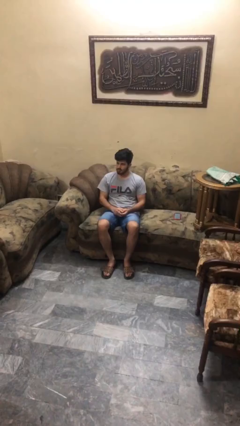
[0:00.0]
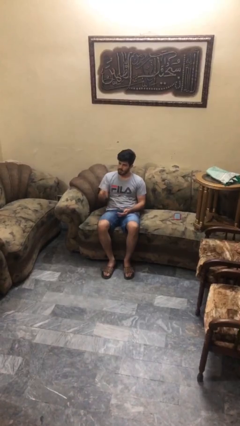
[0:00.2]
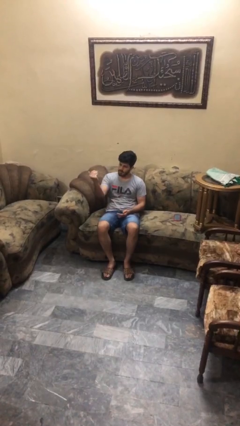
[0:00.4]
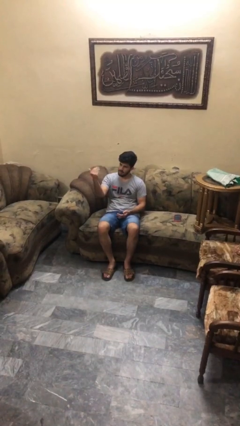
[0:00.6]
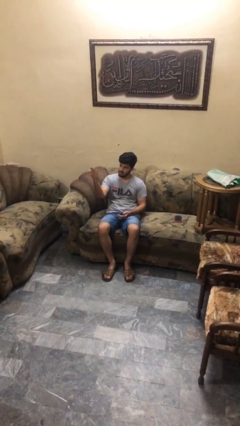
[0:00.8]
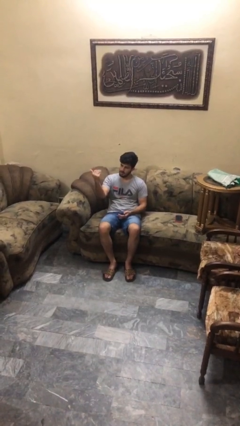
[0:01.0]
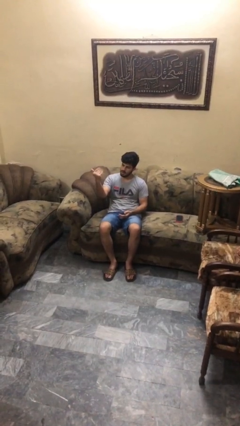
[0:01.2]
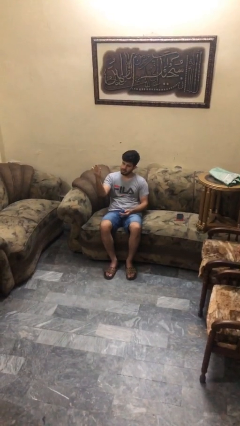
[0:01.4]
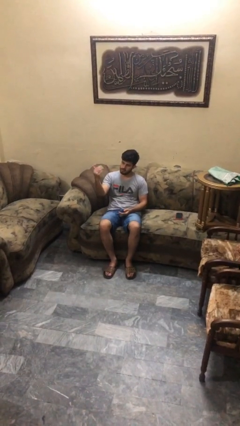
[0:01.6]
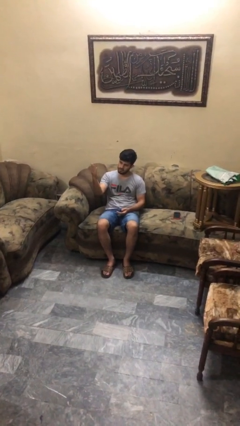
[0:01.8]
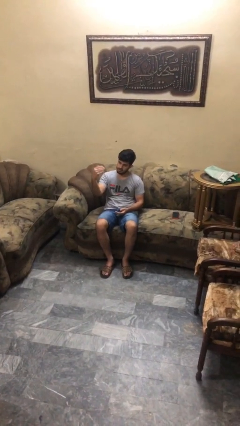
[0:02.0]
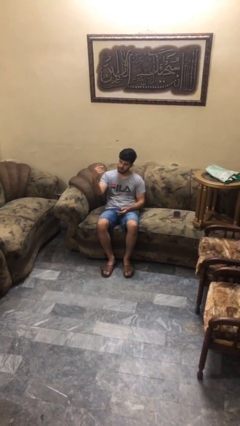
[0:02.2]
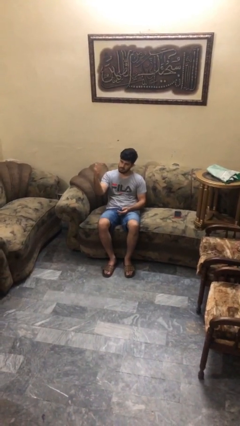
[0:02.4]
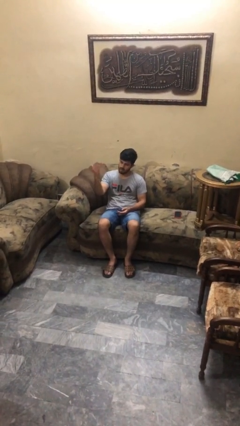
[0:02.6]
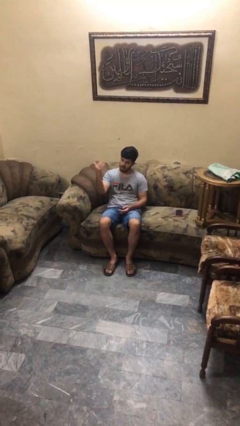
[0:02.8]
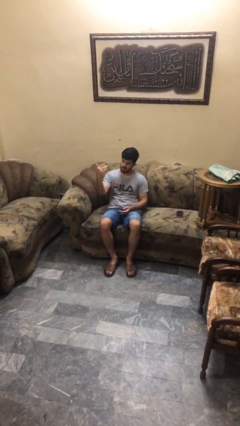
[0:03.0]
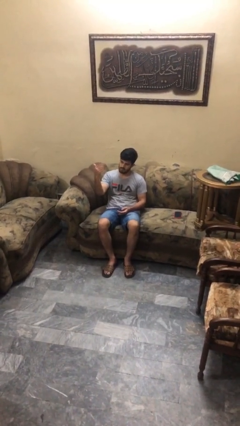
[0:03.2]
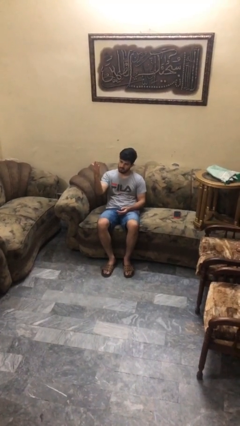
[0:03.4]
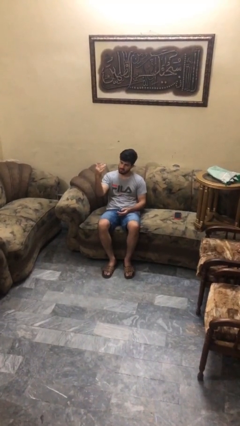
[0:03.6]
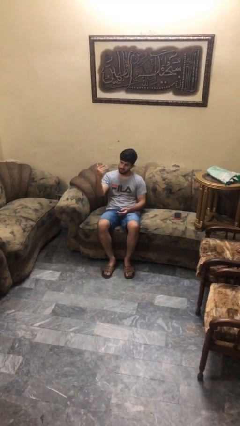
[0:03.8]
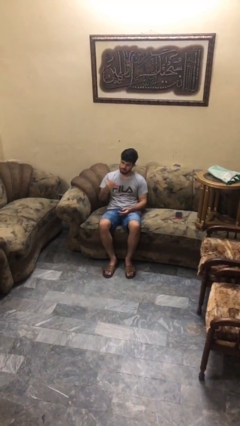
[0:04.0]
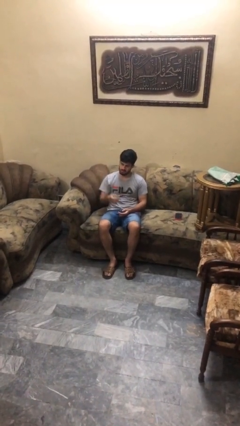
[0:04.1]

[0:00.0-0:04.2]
person gestures come here

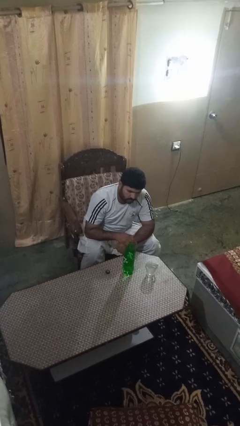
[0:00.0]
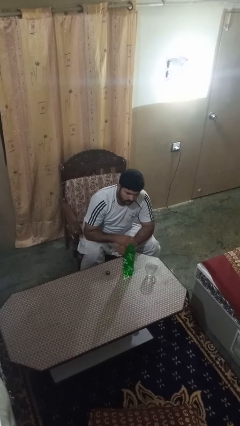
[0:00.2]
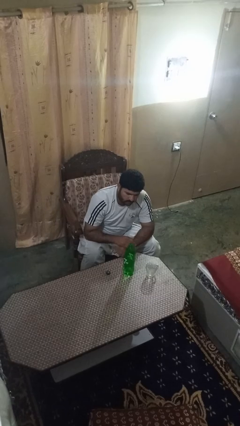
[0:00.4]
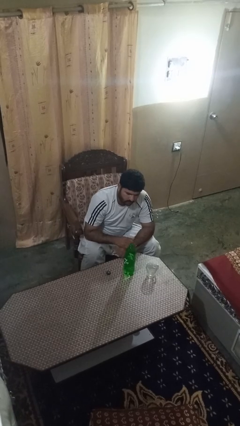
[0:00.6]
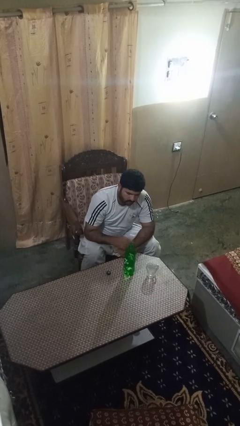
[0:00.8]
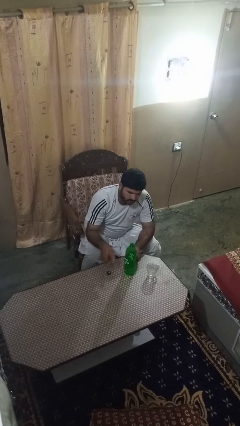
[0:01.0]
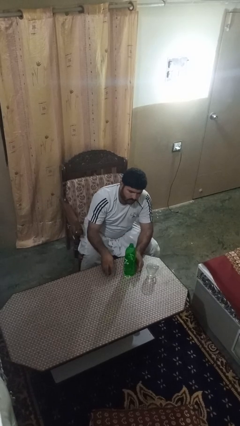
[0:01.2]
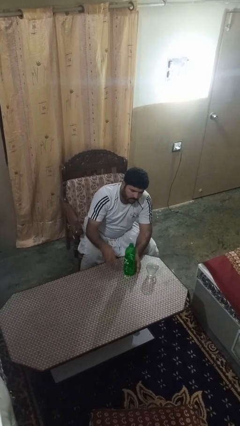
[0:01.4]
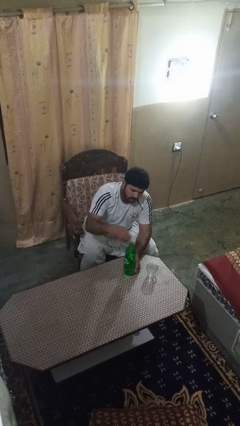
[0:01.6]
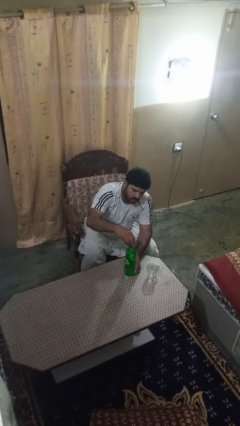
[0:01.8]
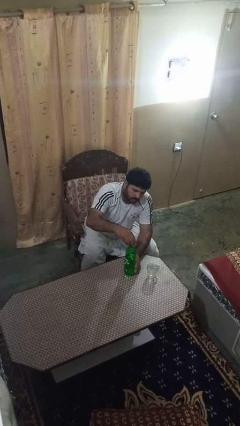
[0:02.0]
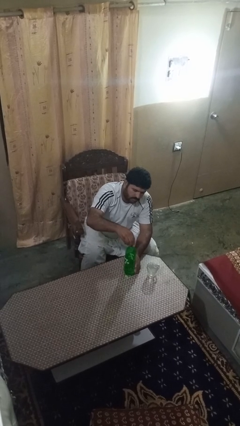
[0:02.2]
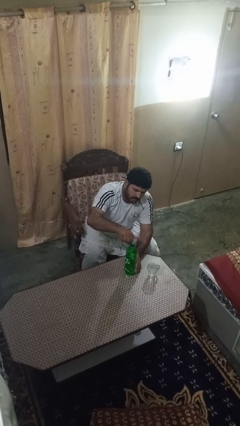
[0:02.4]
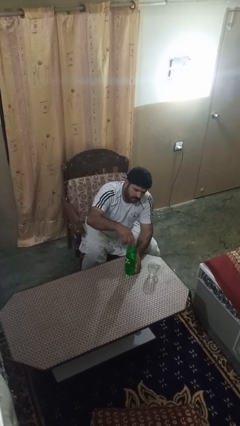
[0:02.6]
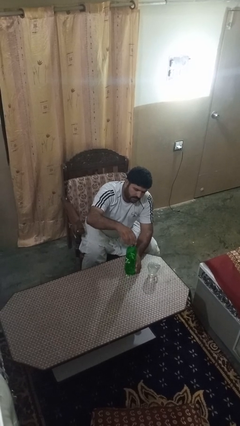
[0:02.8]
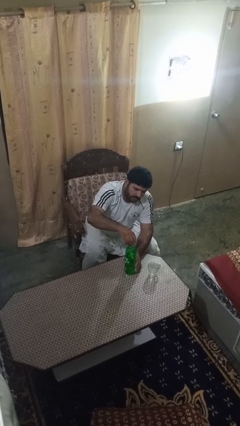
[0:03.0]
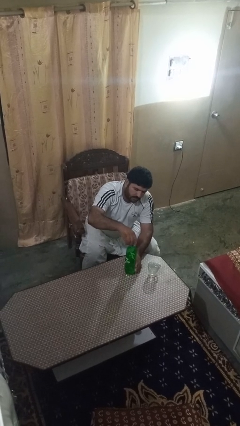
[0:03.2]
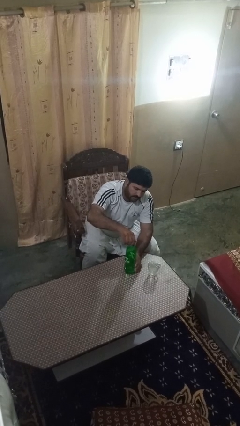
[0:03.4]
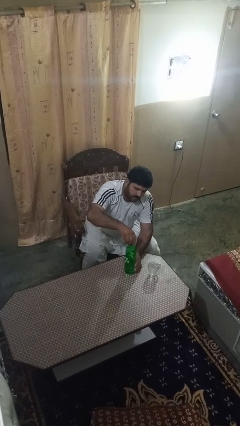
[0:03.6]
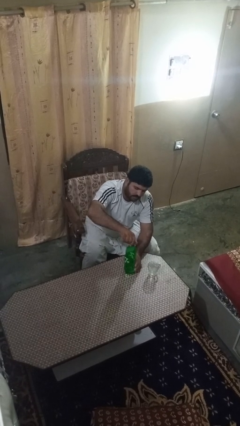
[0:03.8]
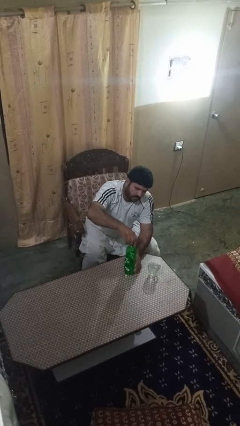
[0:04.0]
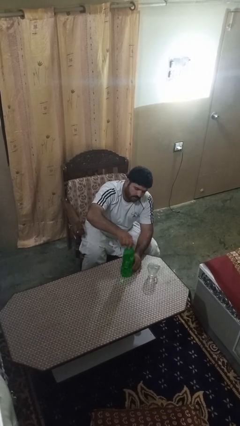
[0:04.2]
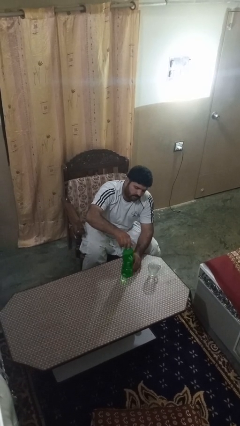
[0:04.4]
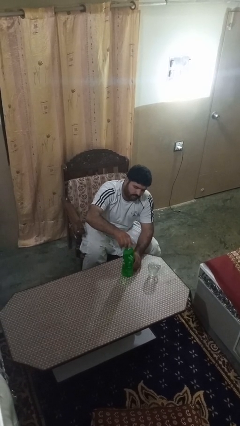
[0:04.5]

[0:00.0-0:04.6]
person screws lid to bottle

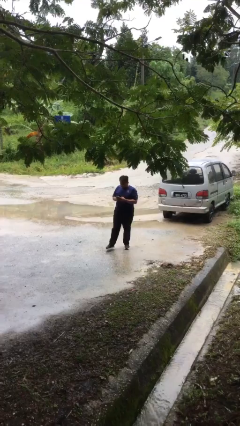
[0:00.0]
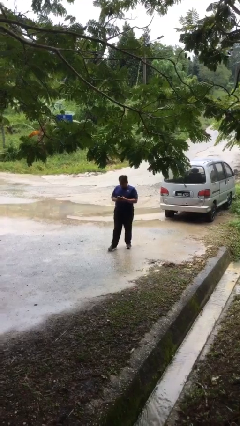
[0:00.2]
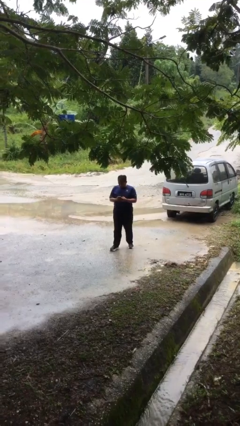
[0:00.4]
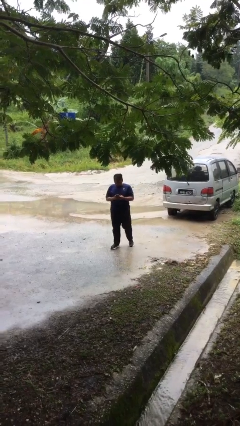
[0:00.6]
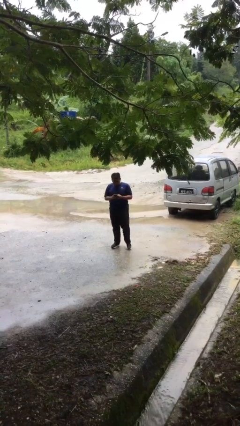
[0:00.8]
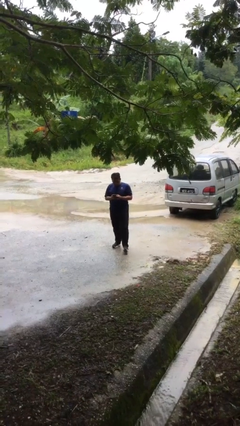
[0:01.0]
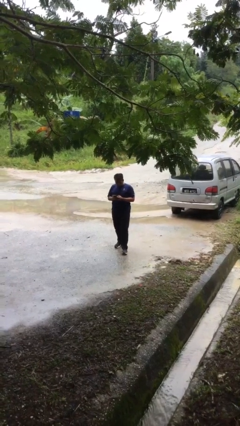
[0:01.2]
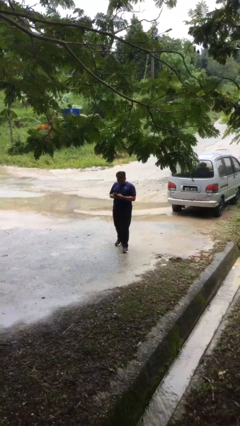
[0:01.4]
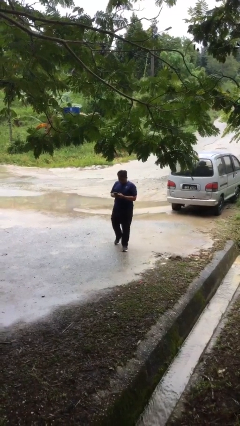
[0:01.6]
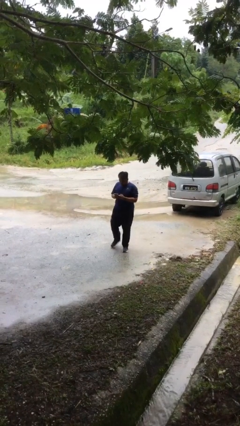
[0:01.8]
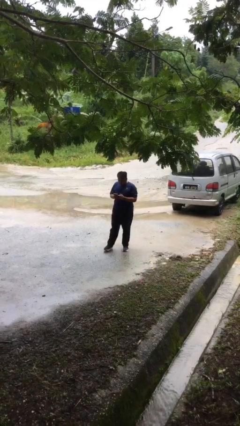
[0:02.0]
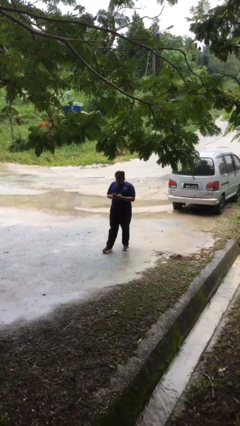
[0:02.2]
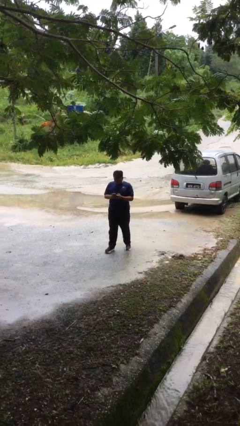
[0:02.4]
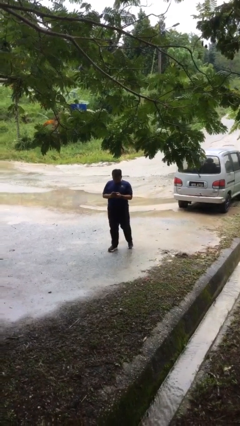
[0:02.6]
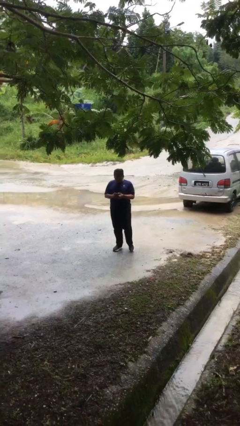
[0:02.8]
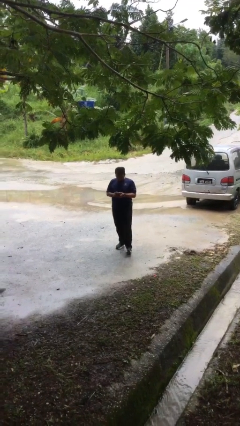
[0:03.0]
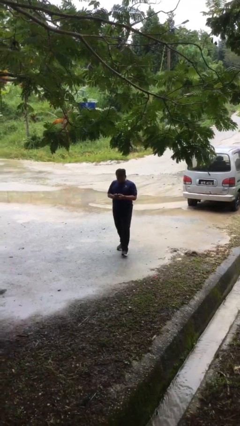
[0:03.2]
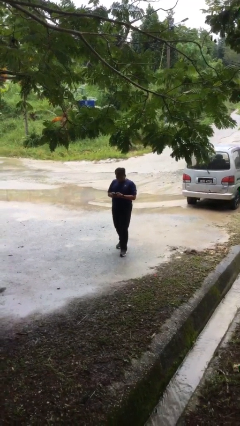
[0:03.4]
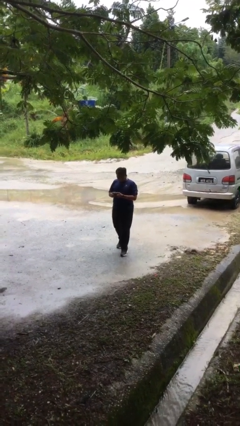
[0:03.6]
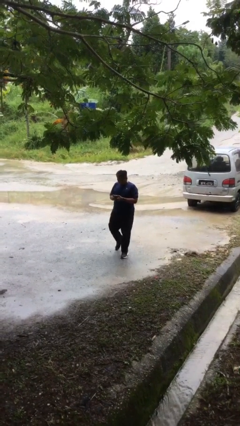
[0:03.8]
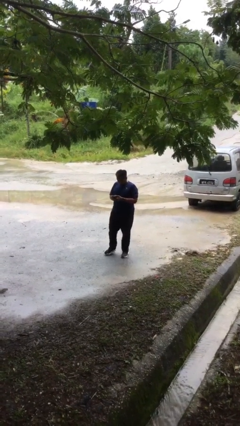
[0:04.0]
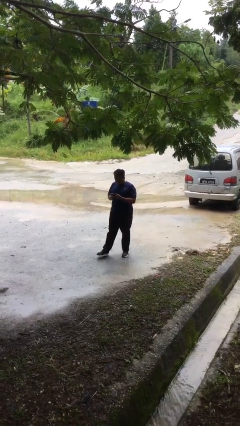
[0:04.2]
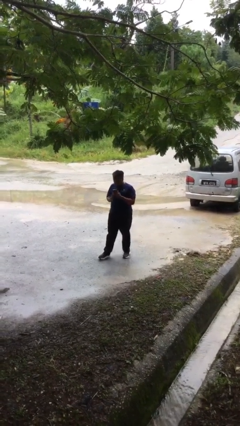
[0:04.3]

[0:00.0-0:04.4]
person texts on phone

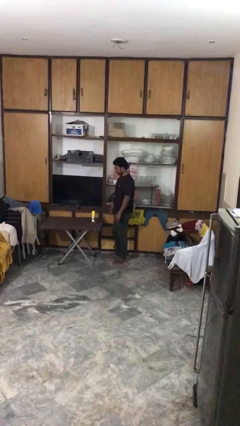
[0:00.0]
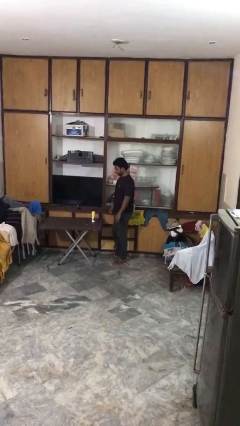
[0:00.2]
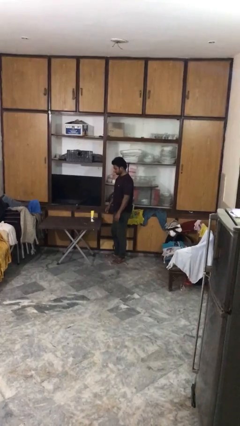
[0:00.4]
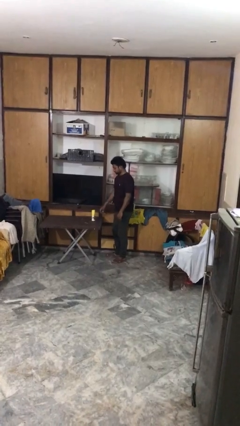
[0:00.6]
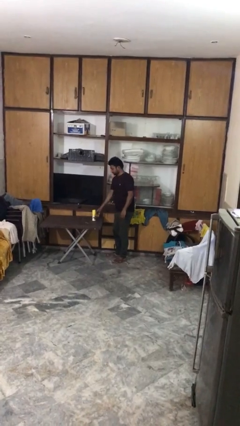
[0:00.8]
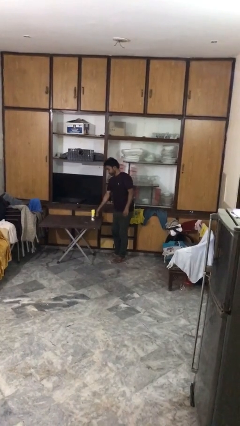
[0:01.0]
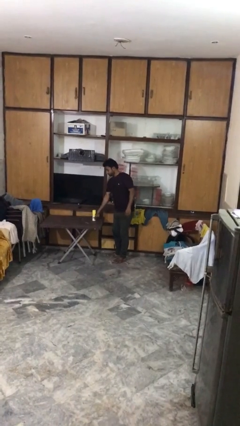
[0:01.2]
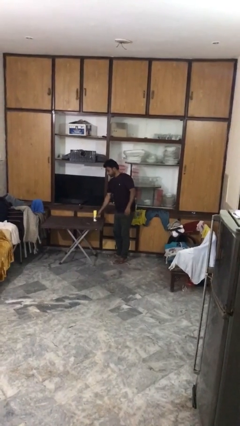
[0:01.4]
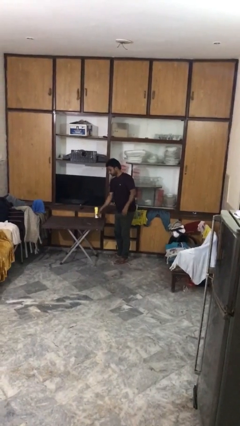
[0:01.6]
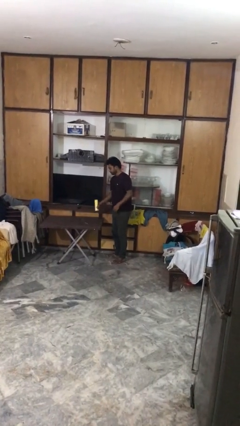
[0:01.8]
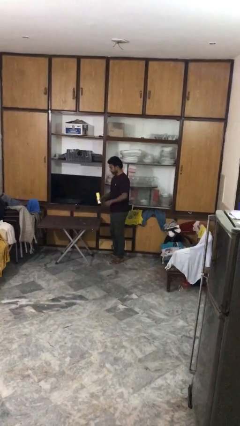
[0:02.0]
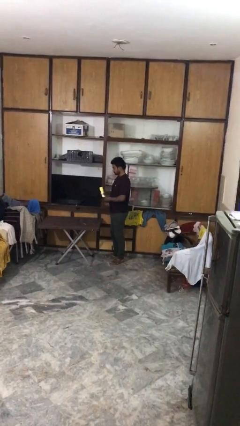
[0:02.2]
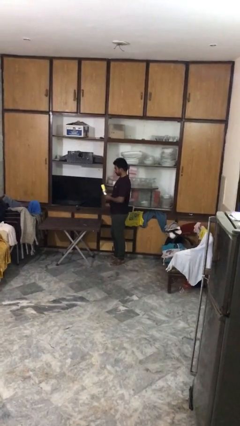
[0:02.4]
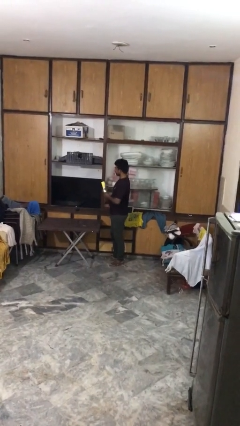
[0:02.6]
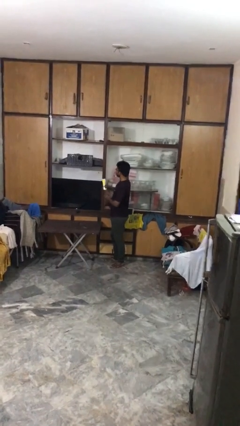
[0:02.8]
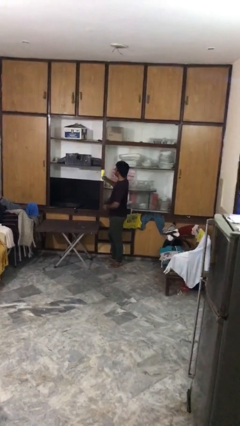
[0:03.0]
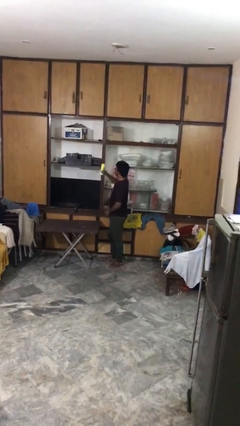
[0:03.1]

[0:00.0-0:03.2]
person picks up object from table

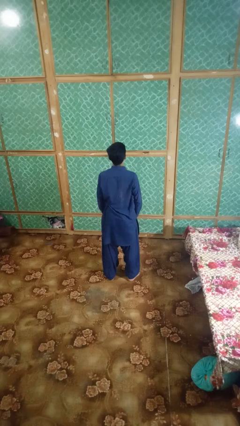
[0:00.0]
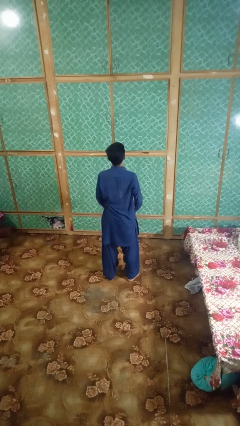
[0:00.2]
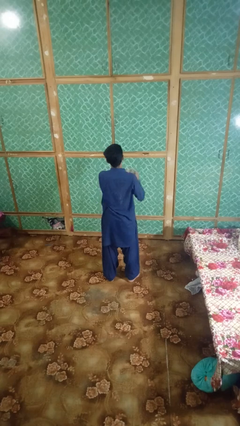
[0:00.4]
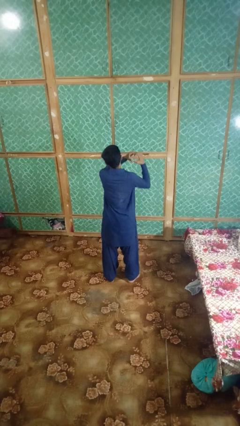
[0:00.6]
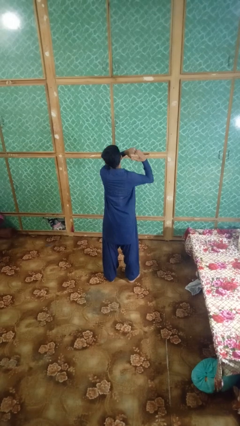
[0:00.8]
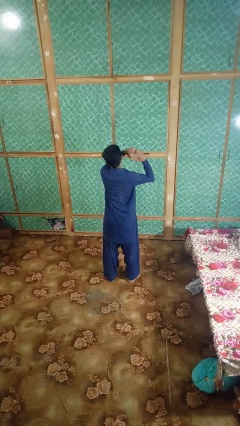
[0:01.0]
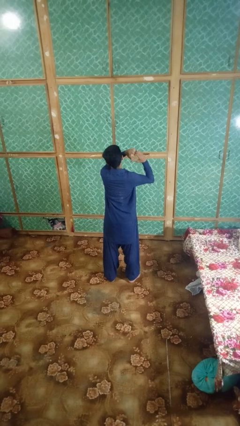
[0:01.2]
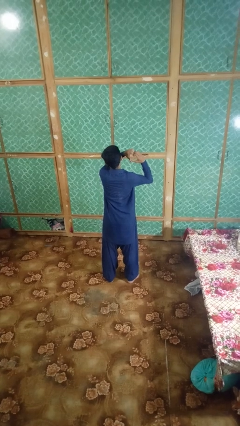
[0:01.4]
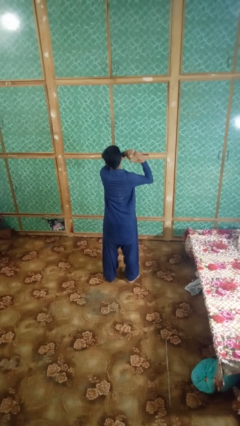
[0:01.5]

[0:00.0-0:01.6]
person gestures heart
